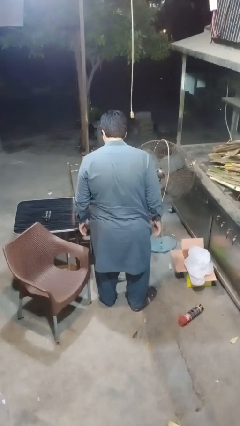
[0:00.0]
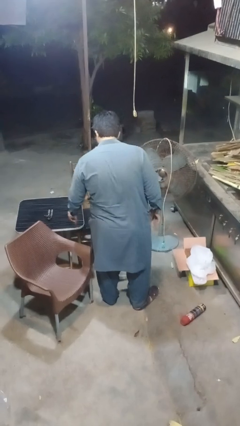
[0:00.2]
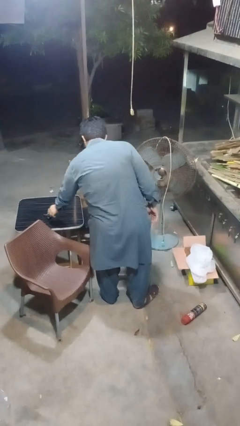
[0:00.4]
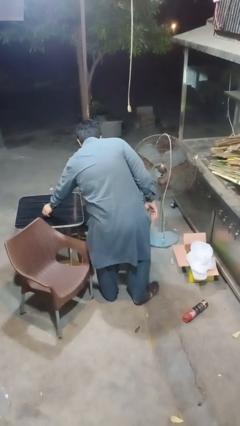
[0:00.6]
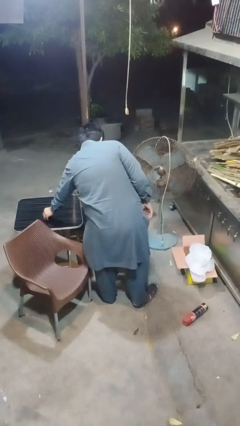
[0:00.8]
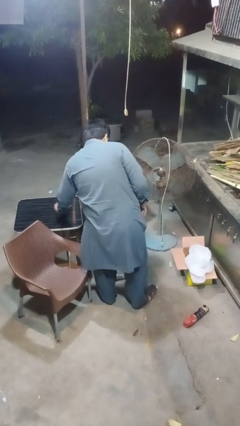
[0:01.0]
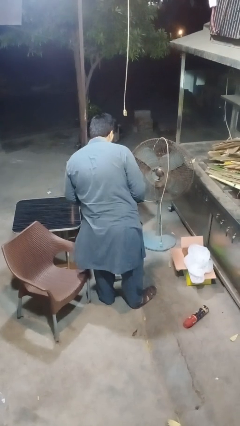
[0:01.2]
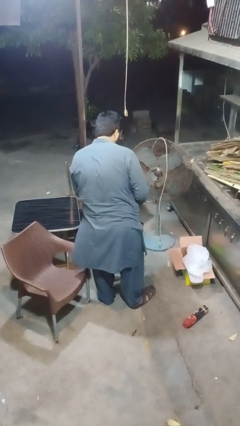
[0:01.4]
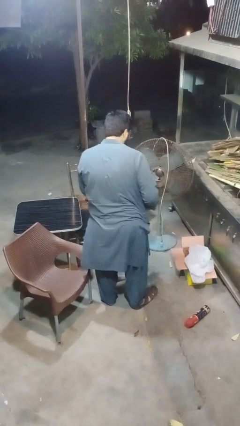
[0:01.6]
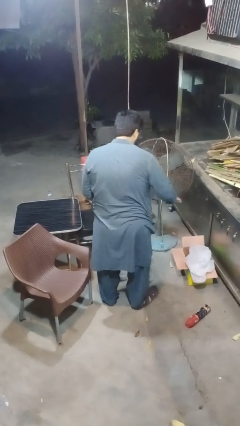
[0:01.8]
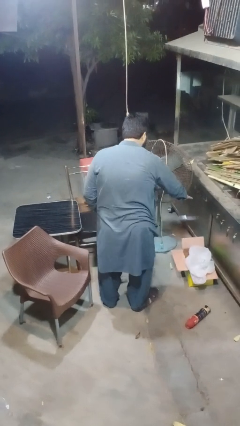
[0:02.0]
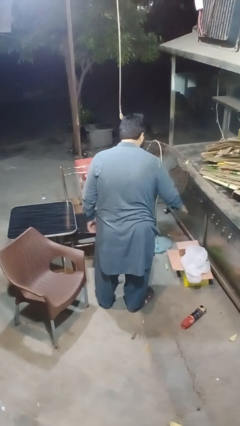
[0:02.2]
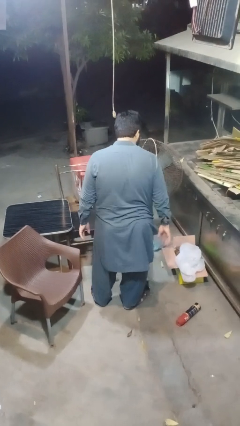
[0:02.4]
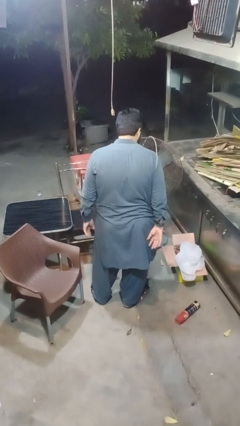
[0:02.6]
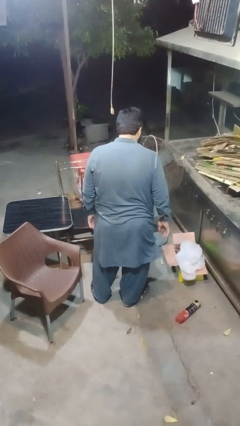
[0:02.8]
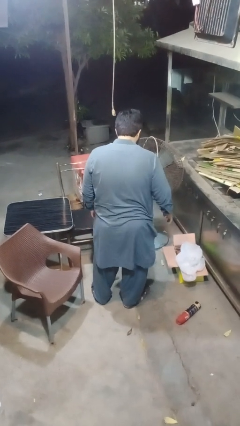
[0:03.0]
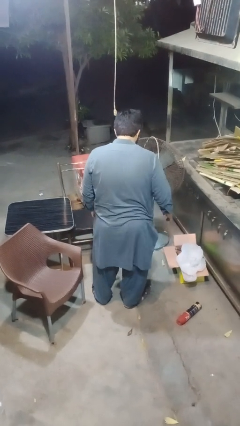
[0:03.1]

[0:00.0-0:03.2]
person discards trash

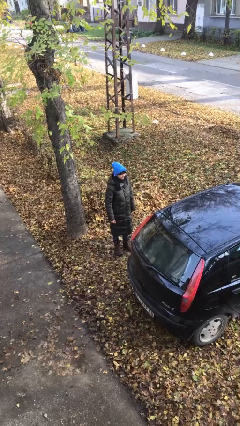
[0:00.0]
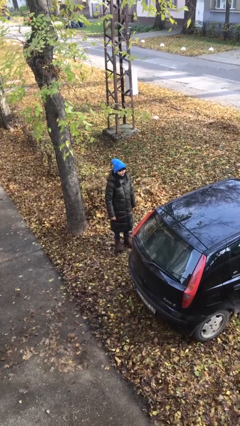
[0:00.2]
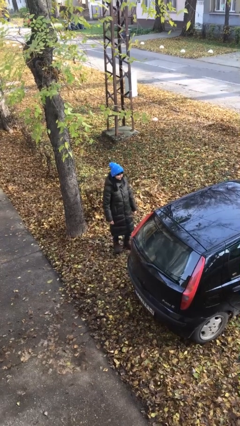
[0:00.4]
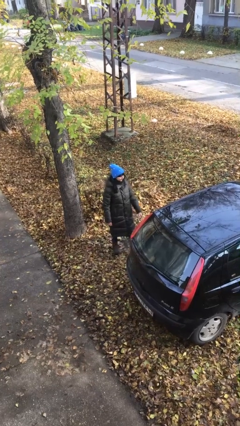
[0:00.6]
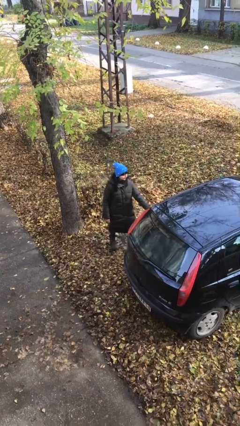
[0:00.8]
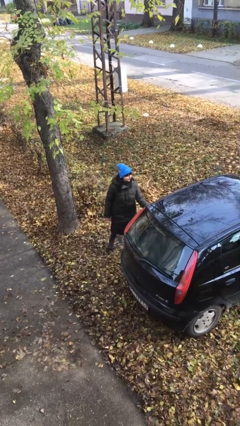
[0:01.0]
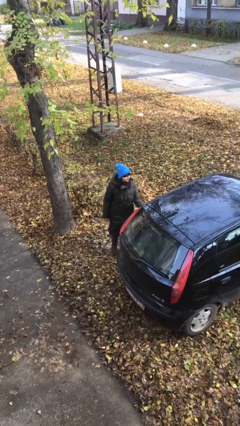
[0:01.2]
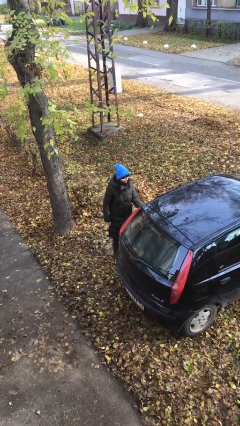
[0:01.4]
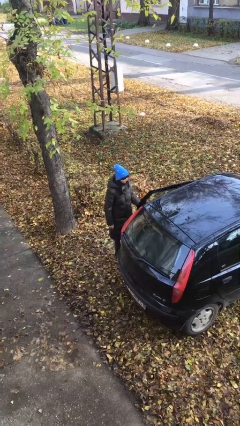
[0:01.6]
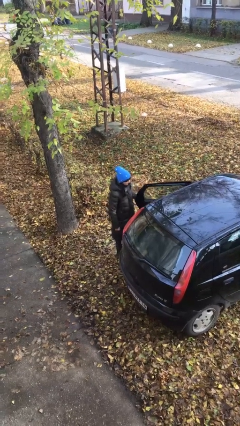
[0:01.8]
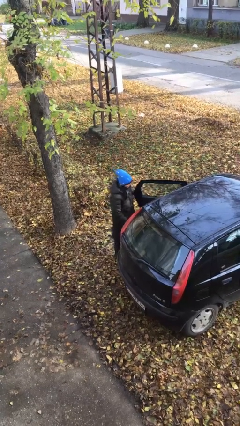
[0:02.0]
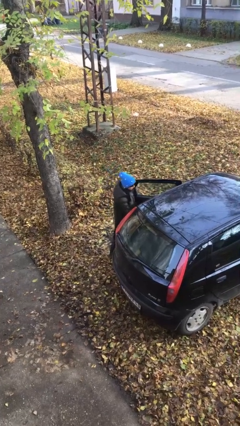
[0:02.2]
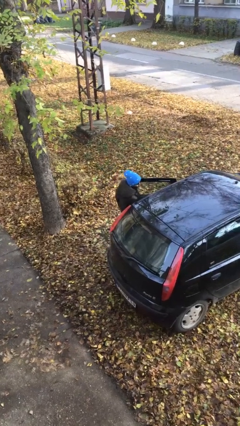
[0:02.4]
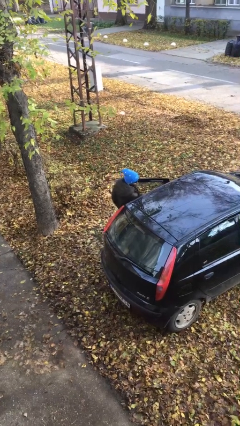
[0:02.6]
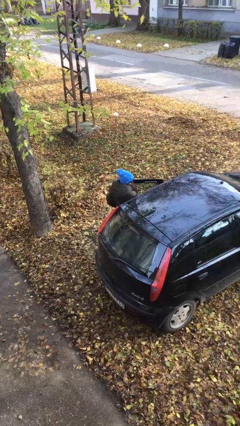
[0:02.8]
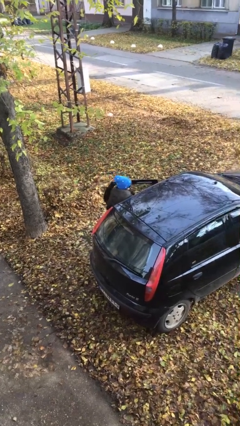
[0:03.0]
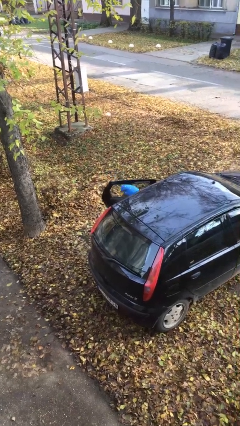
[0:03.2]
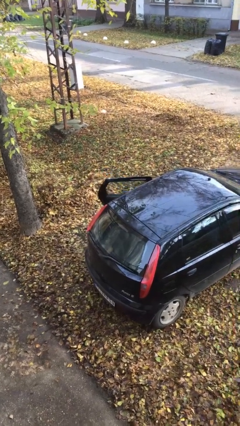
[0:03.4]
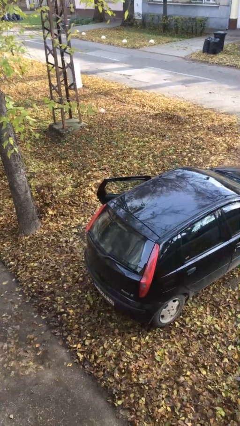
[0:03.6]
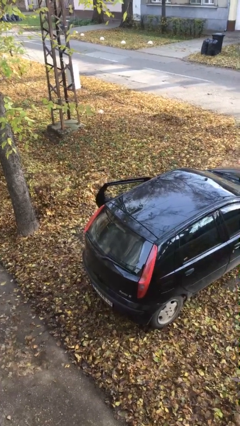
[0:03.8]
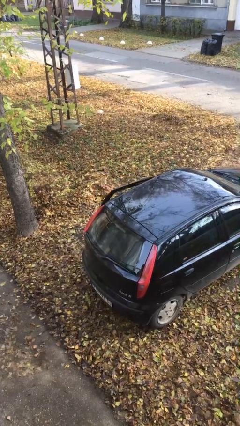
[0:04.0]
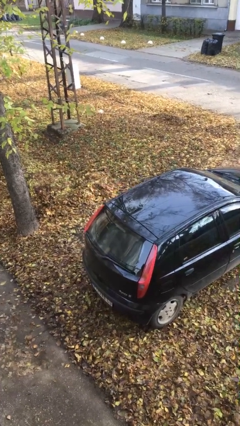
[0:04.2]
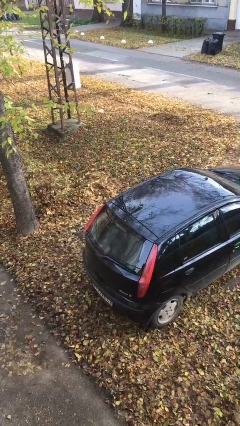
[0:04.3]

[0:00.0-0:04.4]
person enters car

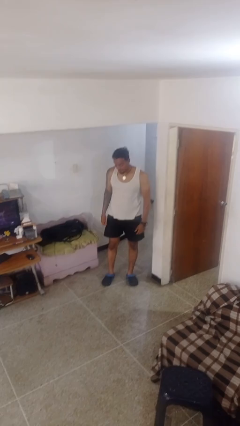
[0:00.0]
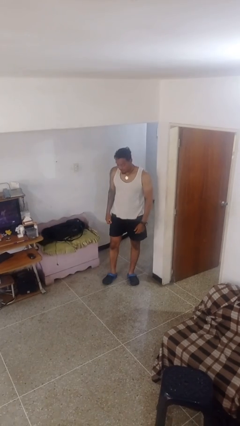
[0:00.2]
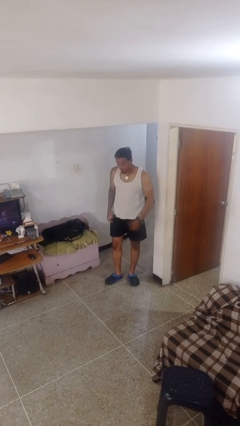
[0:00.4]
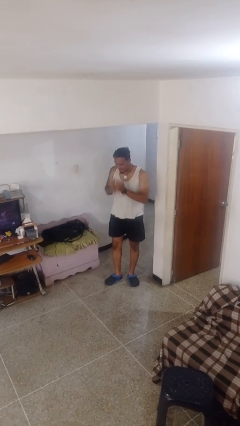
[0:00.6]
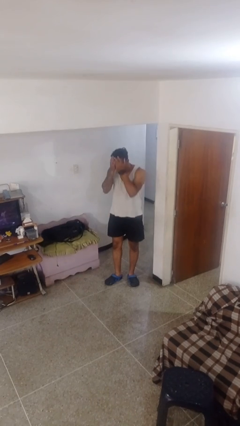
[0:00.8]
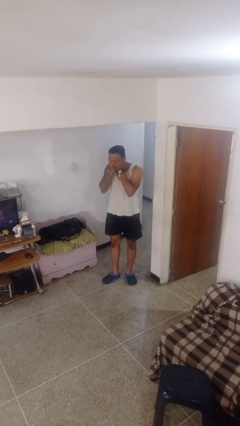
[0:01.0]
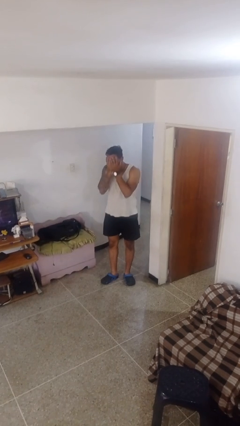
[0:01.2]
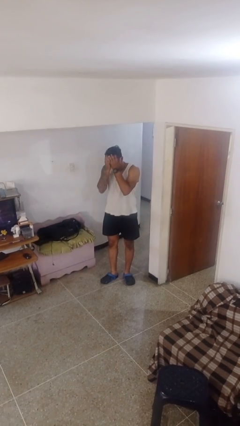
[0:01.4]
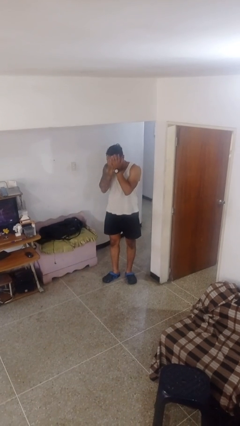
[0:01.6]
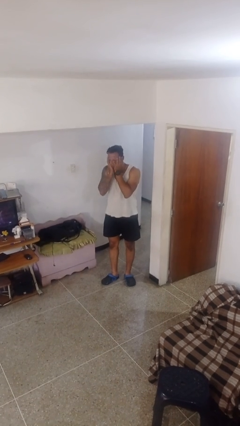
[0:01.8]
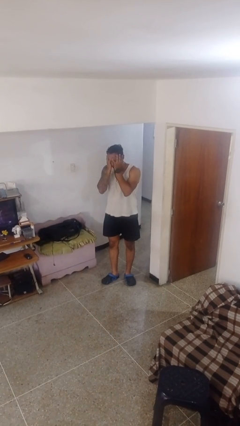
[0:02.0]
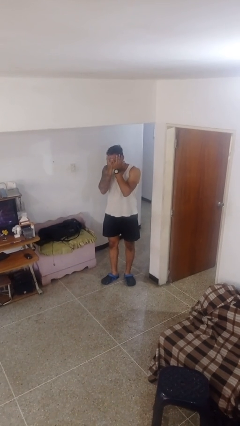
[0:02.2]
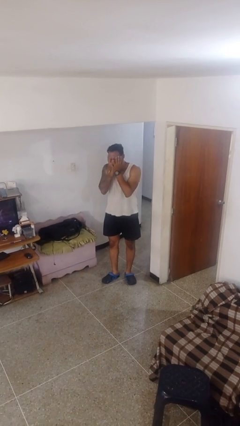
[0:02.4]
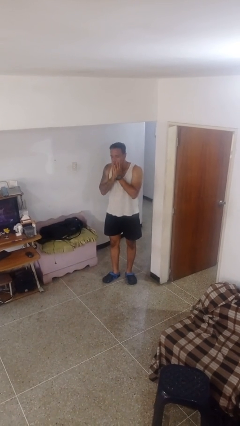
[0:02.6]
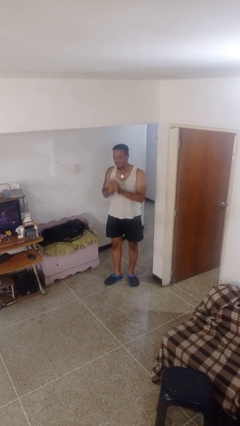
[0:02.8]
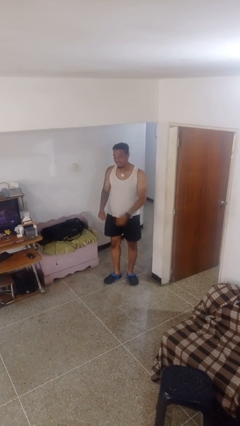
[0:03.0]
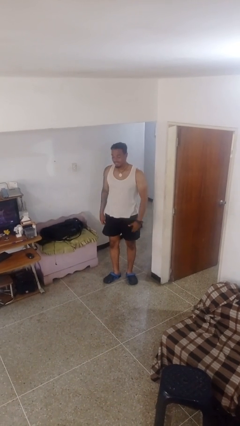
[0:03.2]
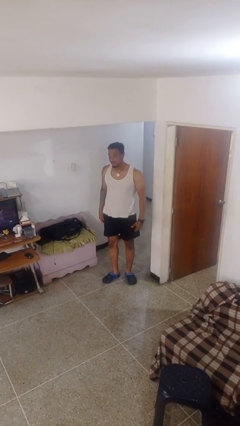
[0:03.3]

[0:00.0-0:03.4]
person scratches face

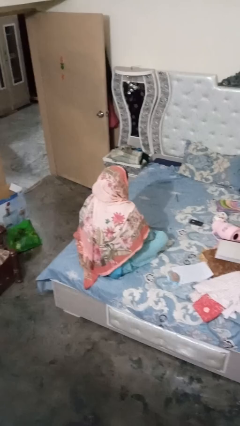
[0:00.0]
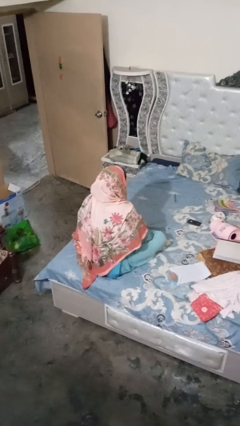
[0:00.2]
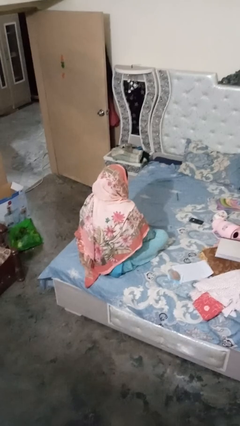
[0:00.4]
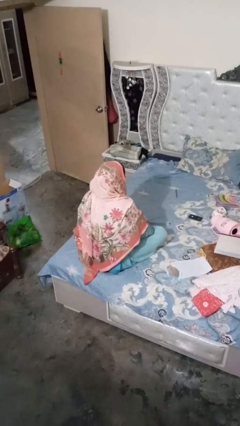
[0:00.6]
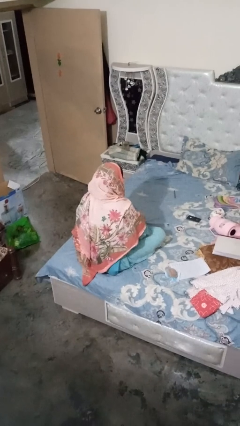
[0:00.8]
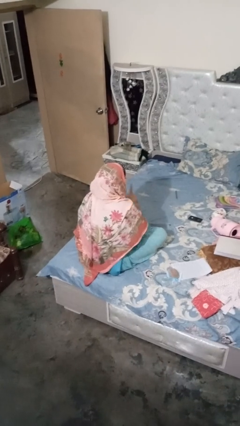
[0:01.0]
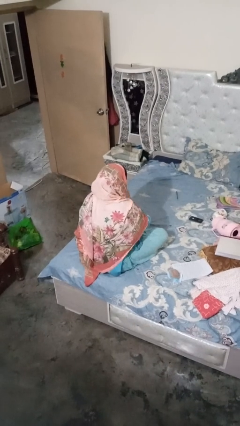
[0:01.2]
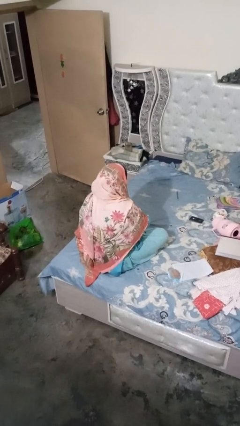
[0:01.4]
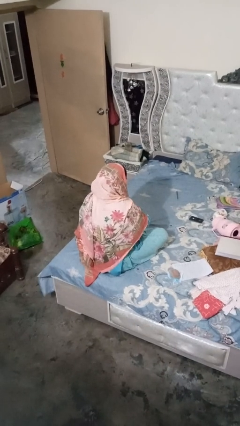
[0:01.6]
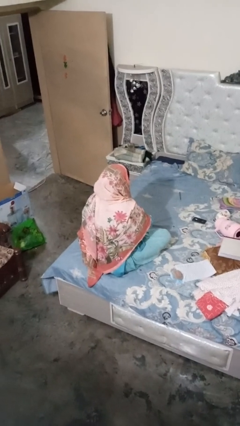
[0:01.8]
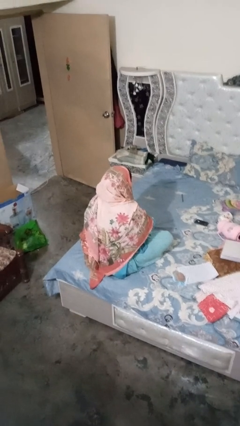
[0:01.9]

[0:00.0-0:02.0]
person gestures be quiet

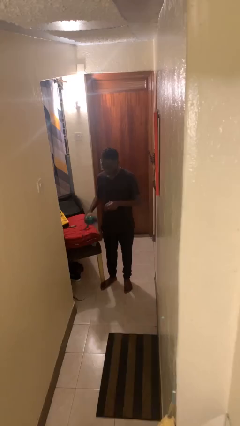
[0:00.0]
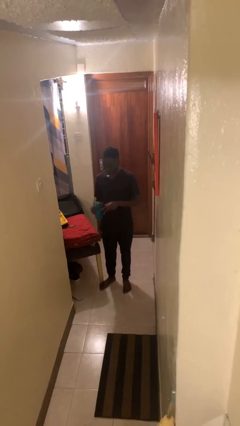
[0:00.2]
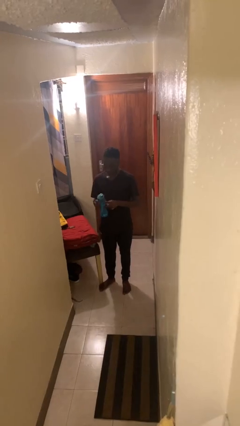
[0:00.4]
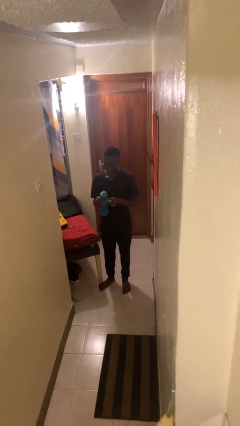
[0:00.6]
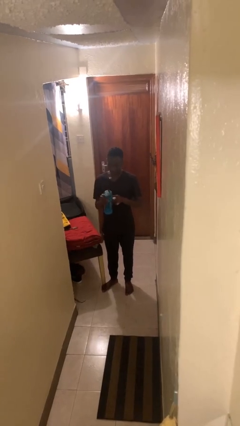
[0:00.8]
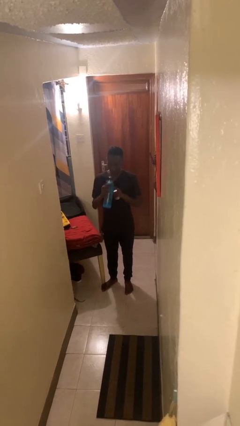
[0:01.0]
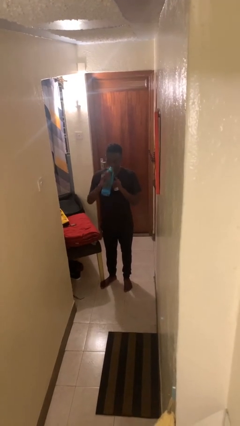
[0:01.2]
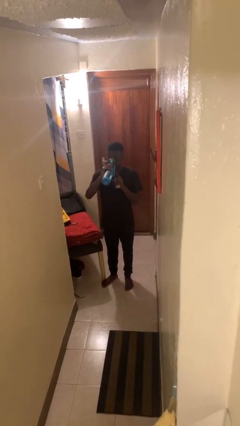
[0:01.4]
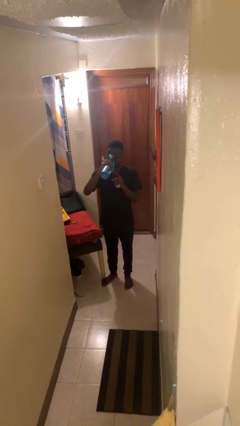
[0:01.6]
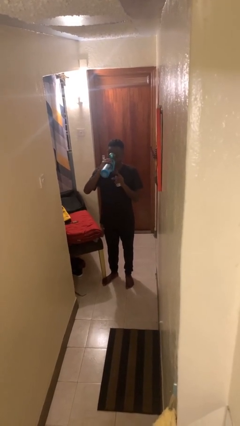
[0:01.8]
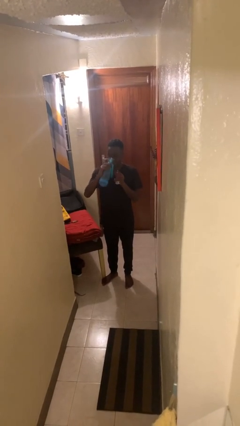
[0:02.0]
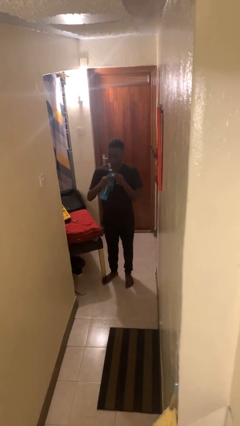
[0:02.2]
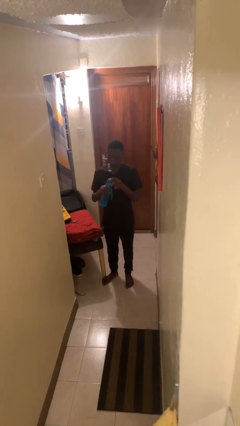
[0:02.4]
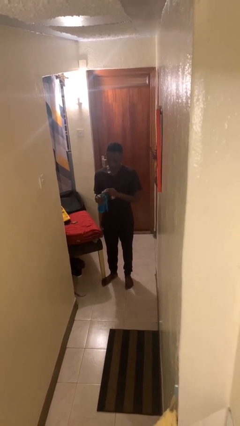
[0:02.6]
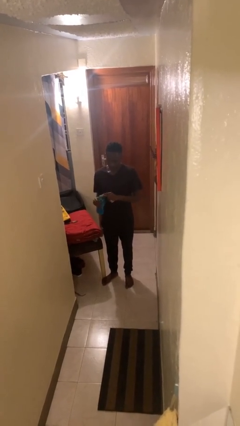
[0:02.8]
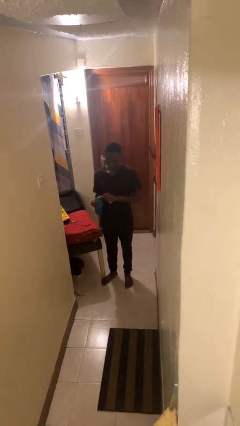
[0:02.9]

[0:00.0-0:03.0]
person drinks from cup

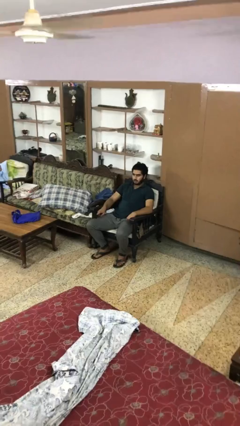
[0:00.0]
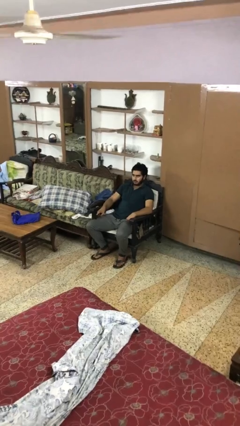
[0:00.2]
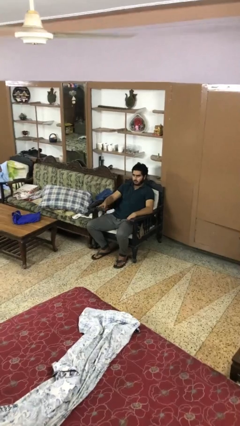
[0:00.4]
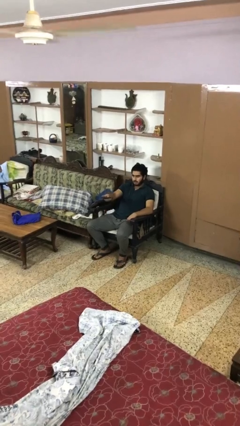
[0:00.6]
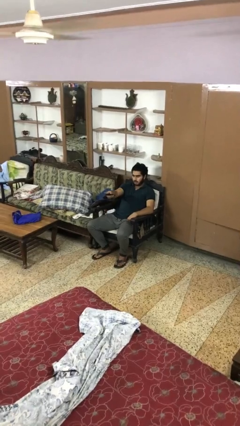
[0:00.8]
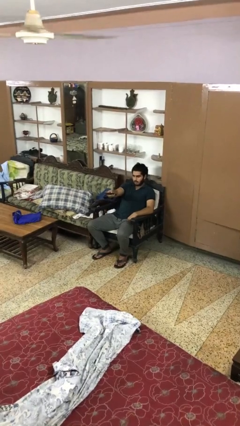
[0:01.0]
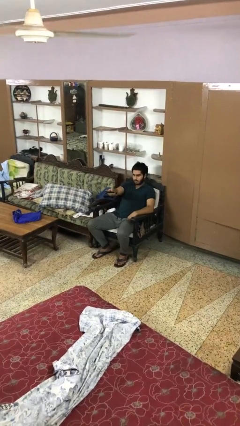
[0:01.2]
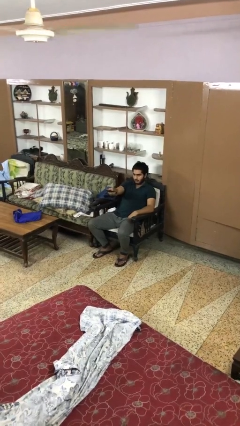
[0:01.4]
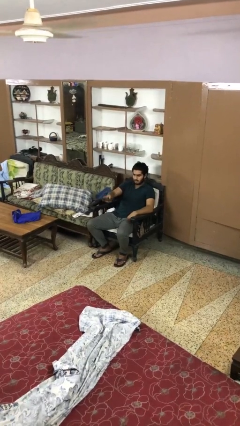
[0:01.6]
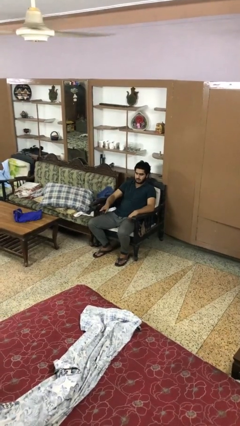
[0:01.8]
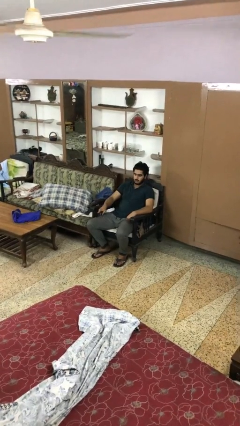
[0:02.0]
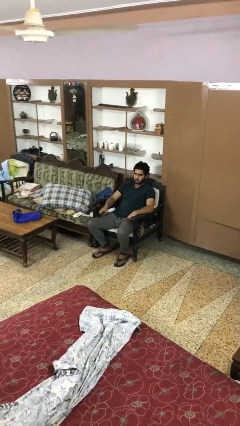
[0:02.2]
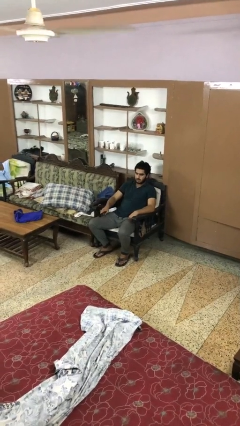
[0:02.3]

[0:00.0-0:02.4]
person uses television remote
